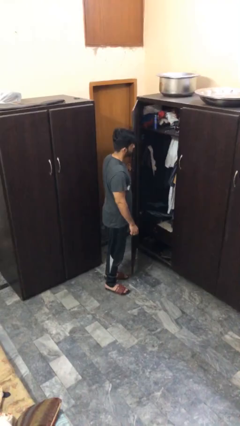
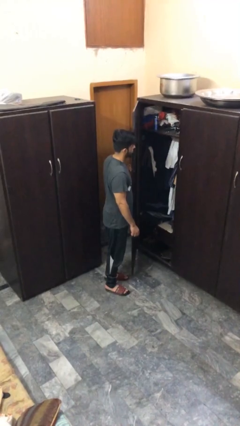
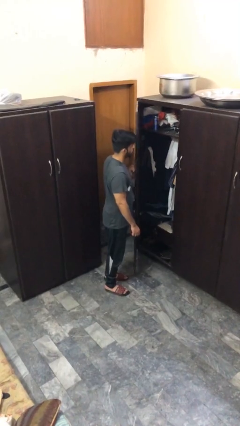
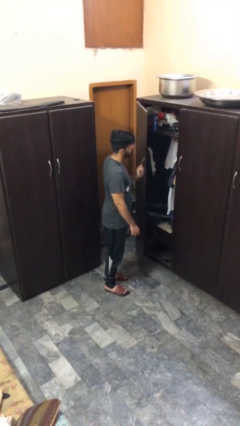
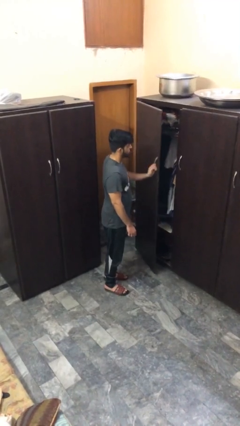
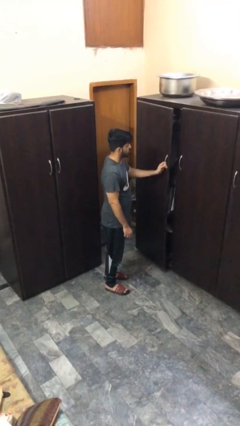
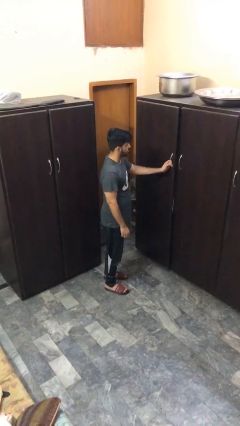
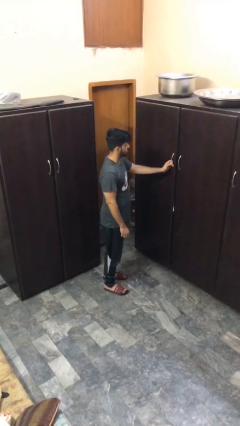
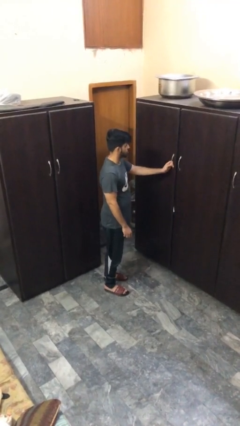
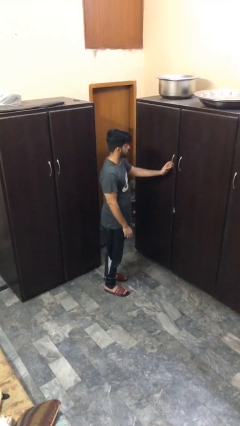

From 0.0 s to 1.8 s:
person closes dresser drawer

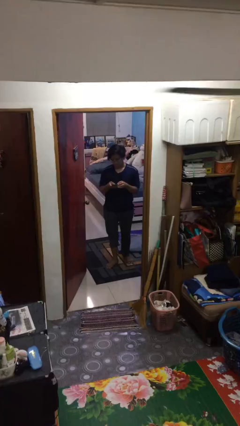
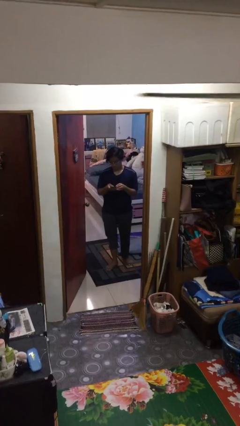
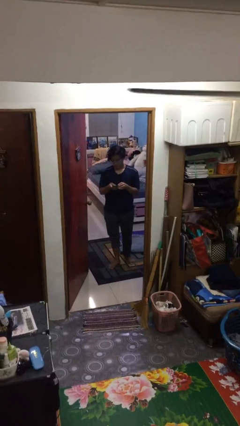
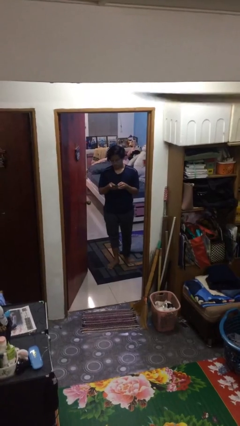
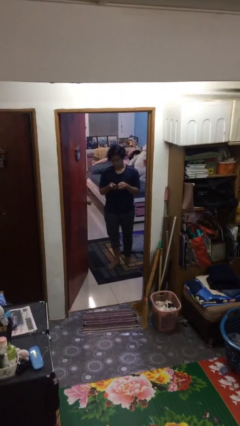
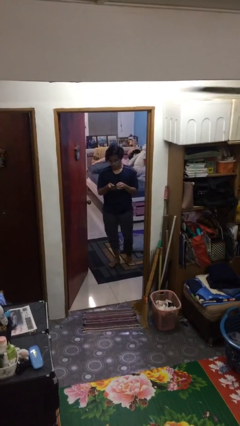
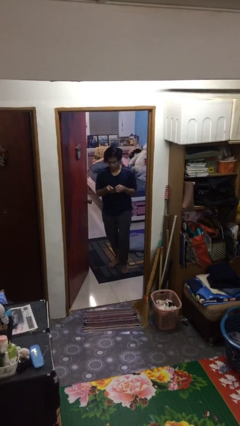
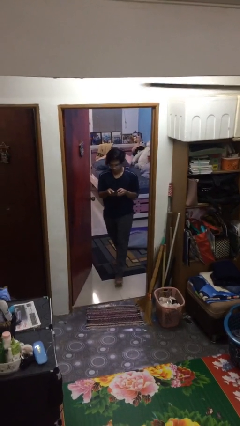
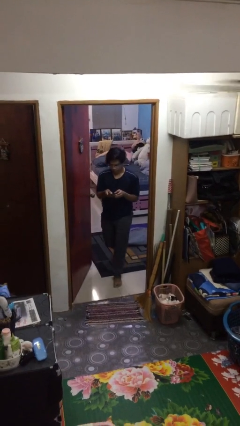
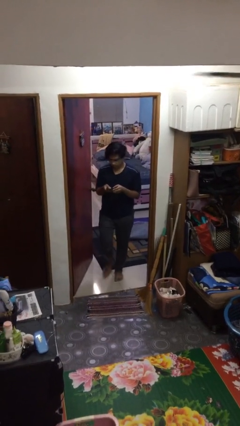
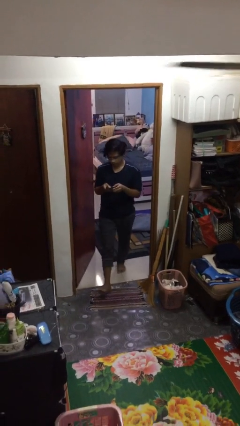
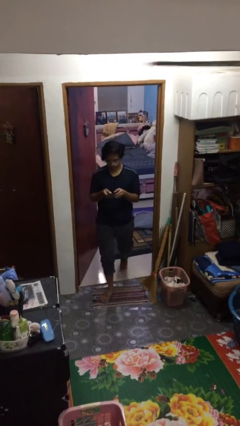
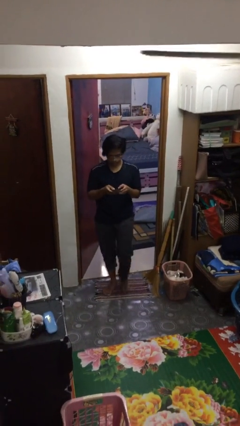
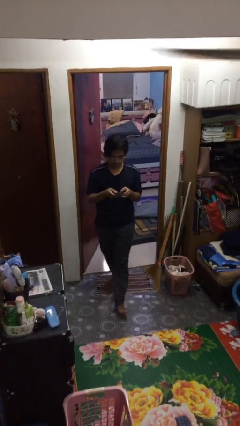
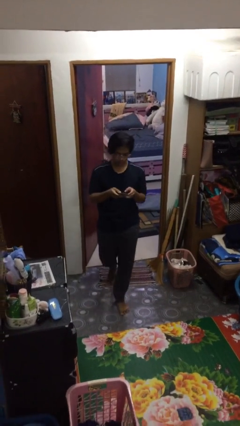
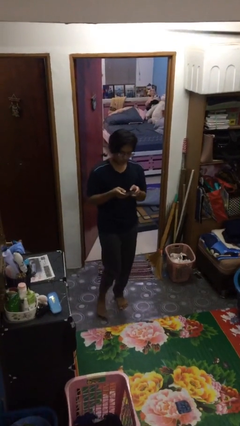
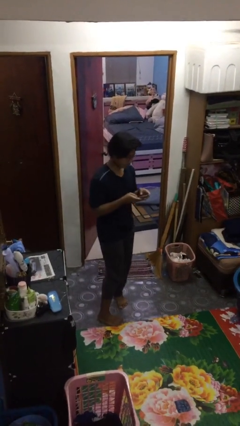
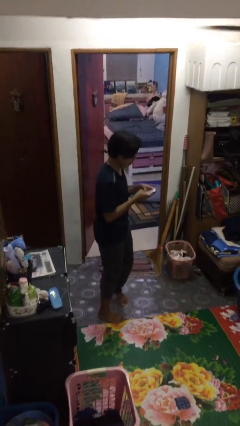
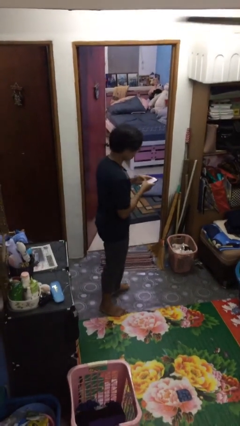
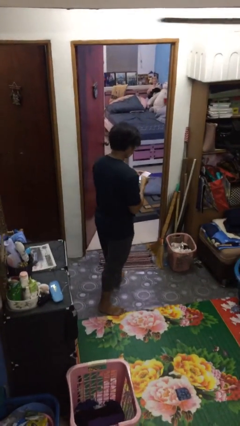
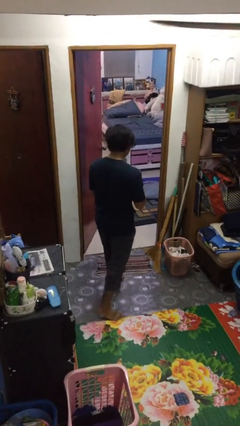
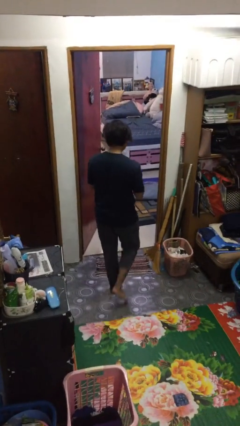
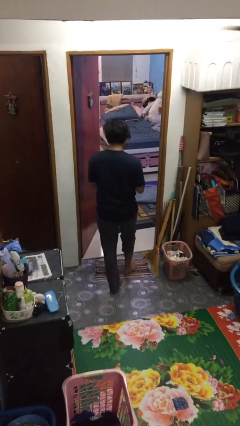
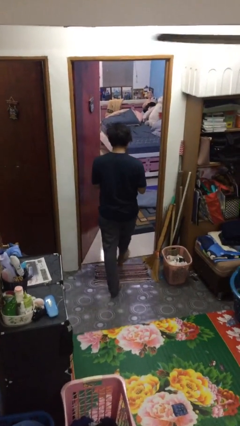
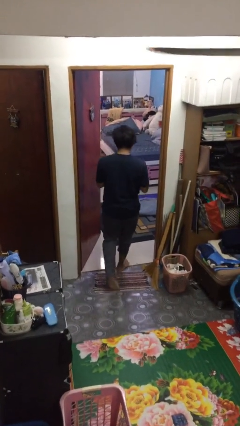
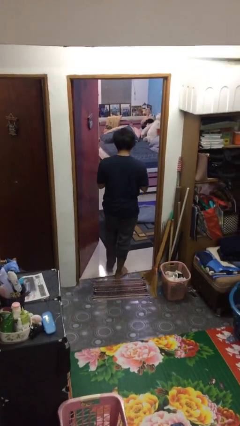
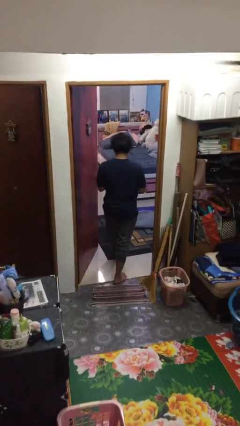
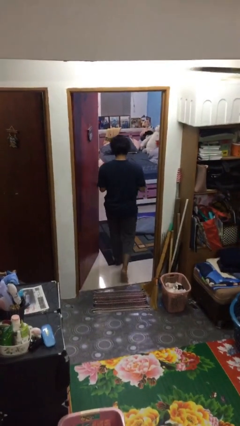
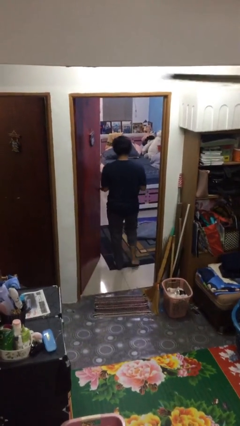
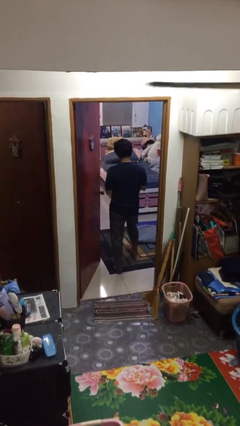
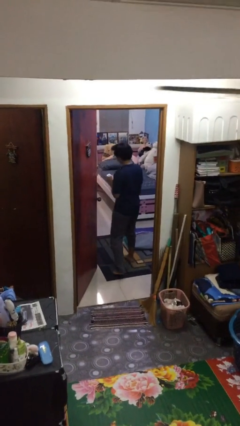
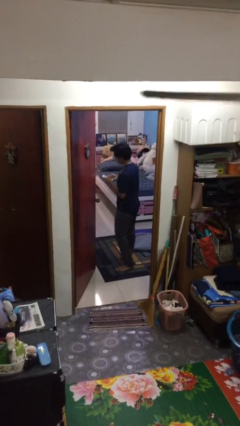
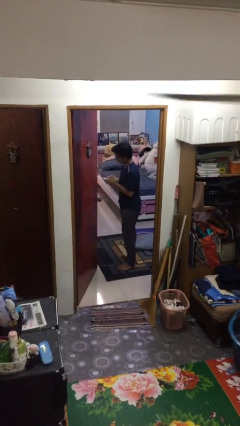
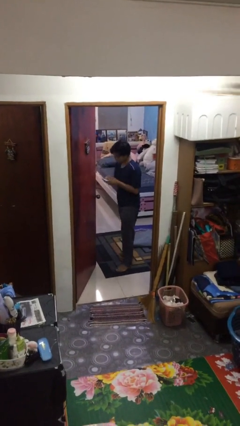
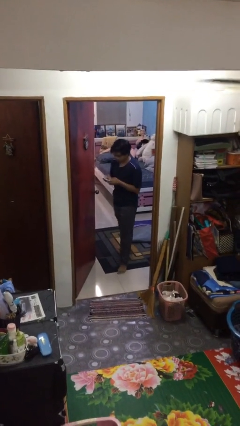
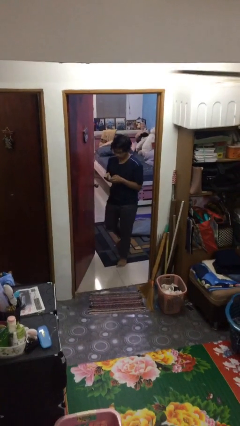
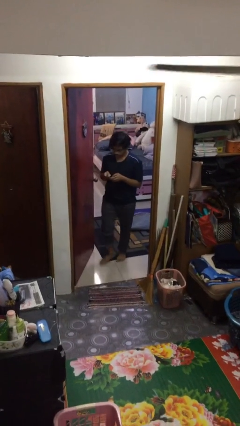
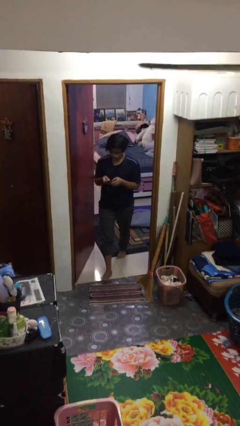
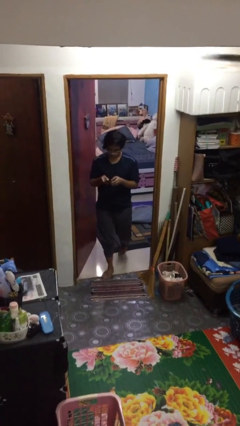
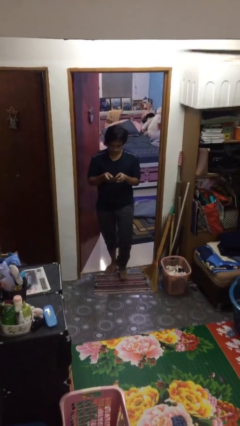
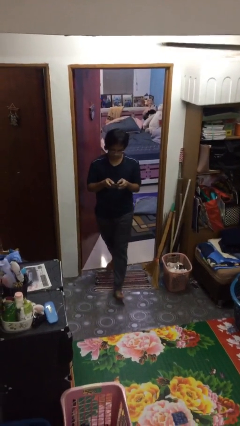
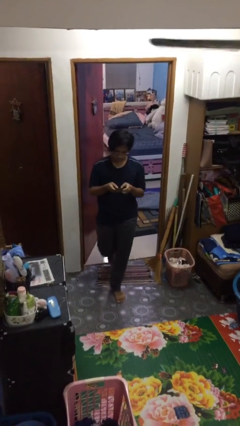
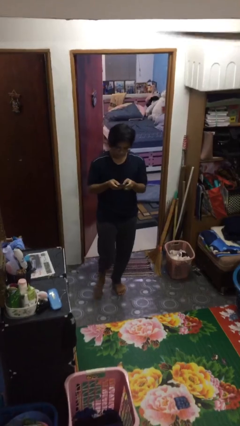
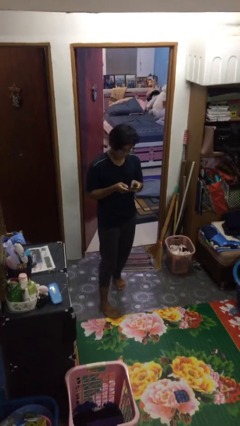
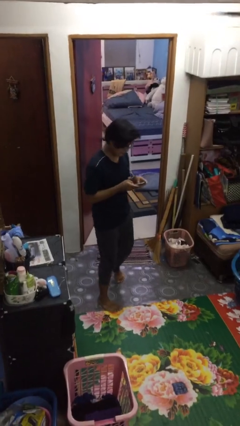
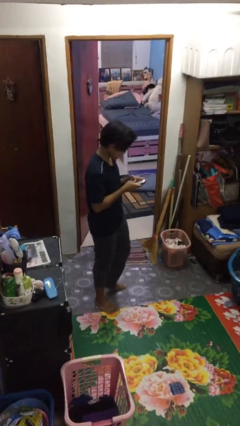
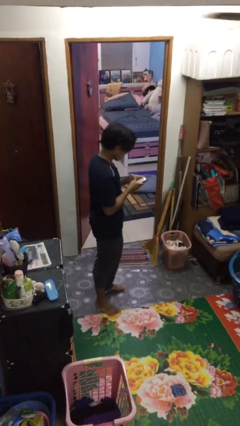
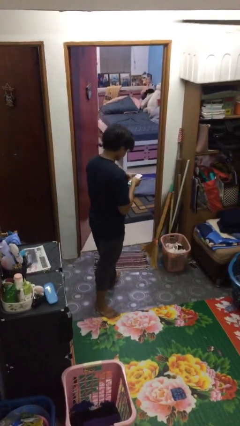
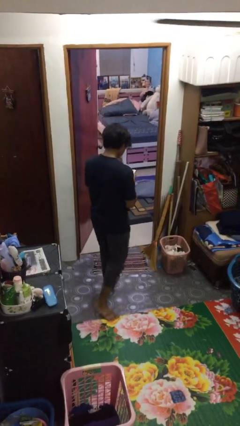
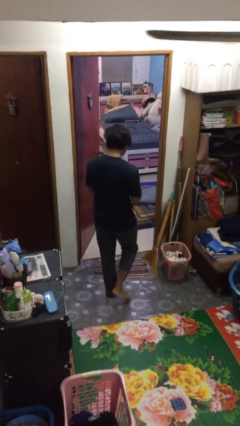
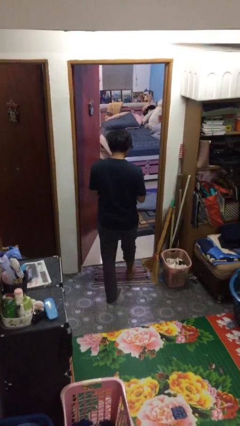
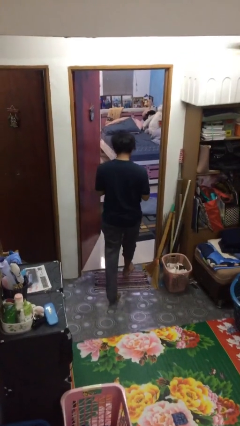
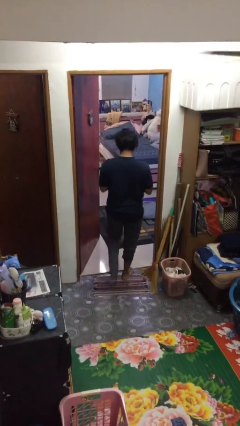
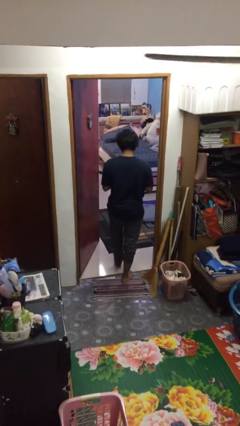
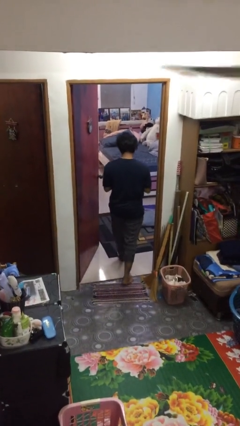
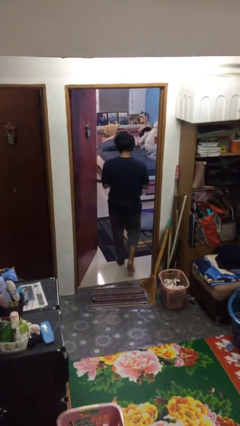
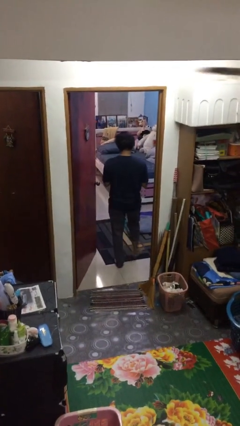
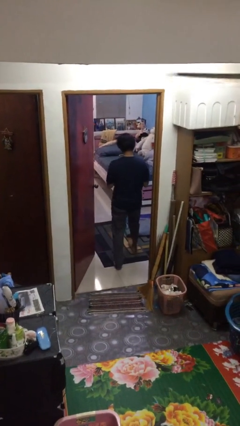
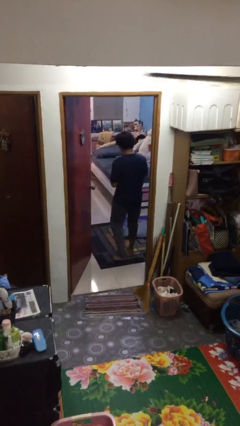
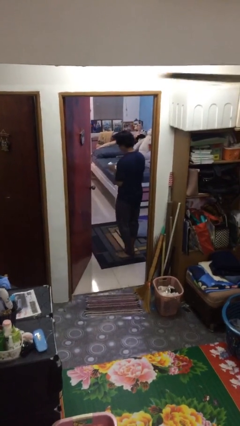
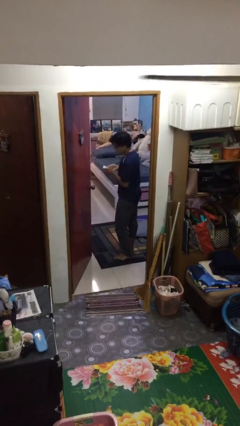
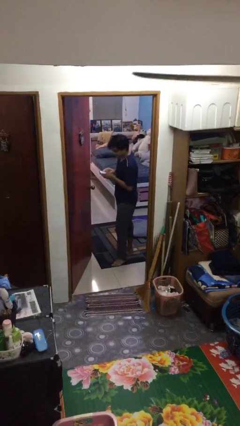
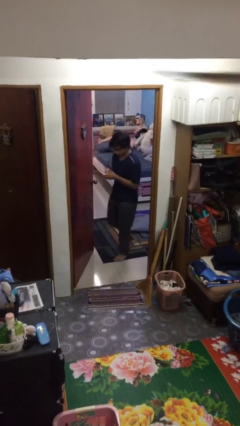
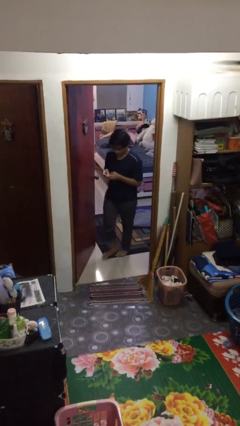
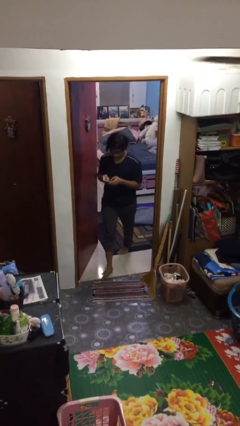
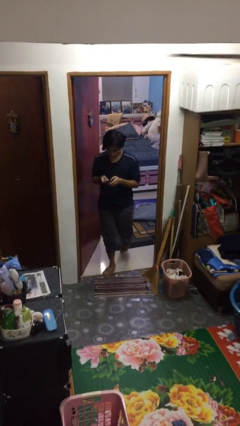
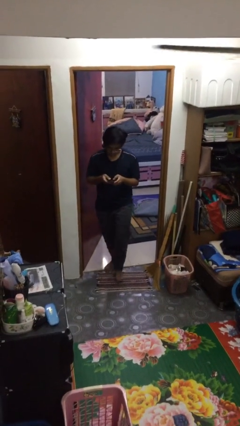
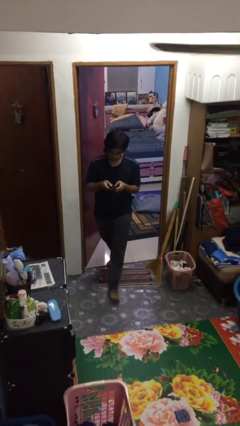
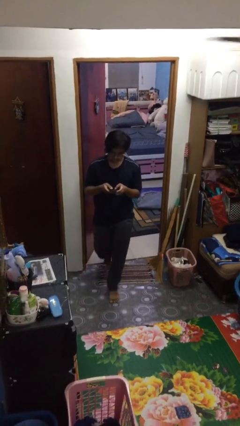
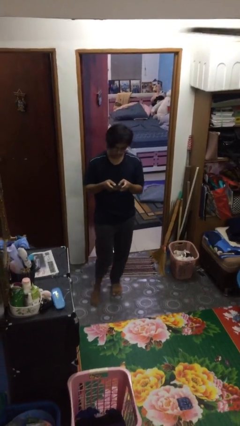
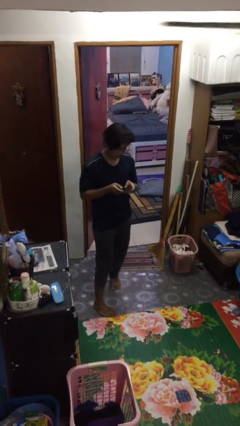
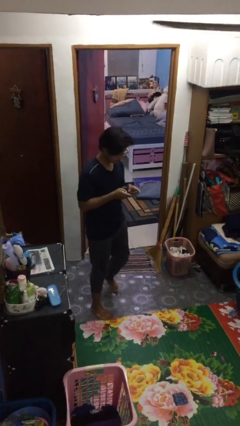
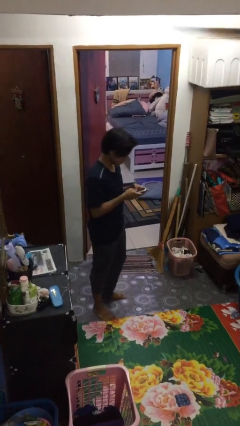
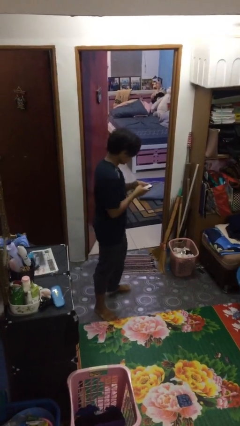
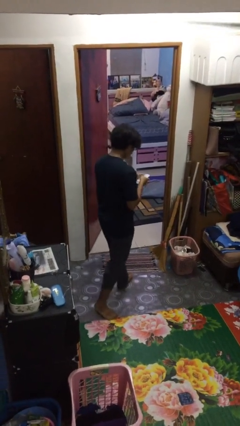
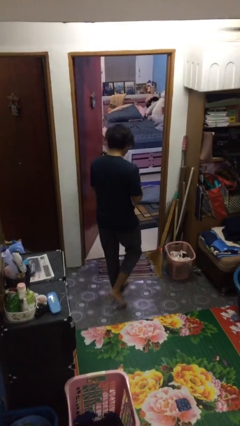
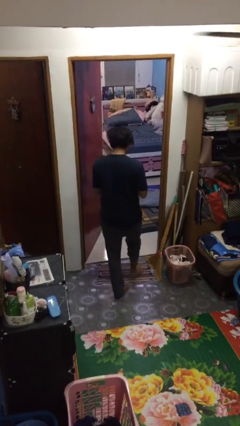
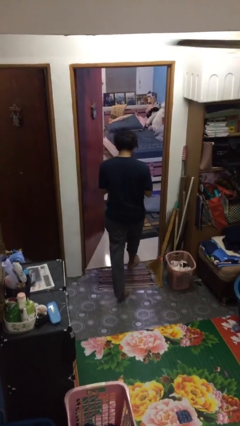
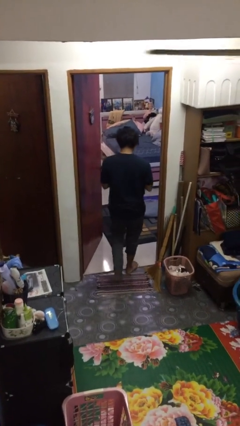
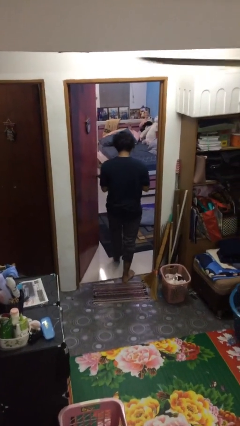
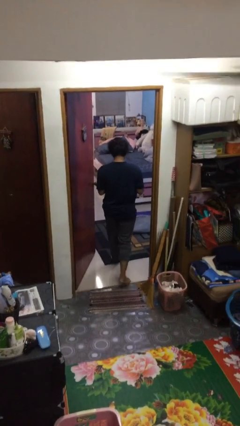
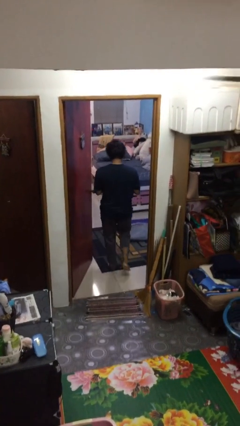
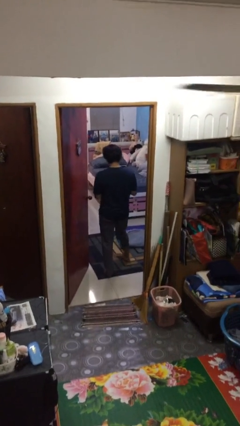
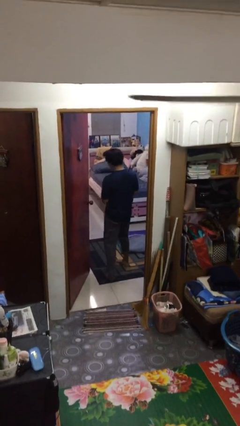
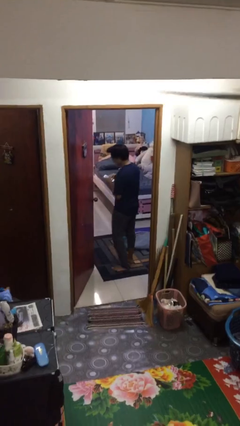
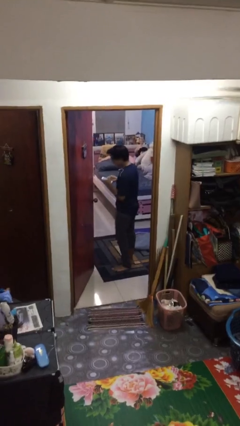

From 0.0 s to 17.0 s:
person texts on phone
